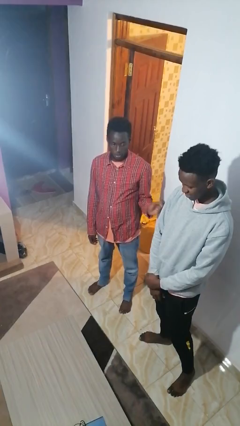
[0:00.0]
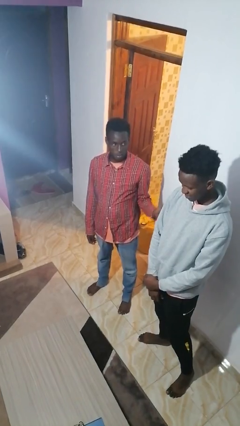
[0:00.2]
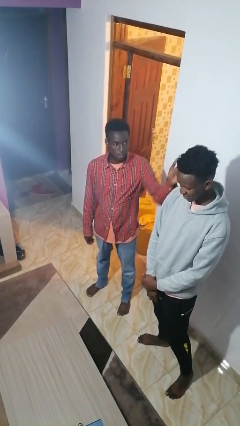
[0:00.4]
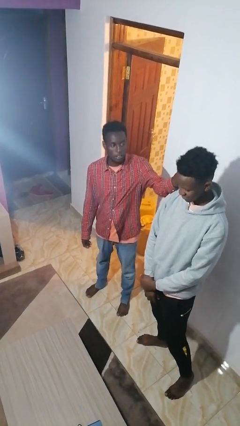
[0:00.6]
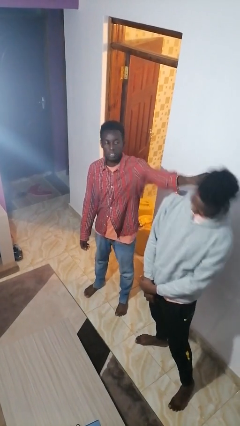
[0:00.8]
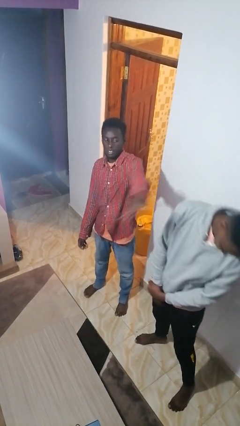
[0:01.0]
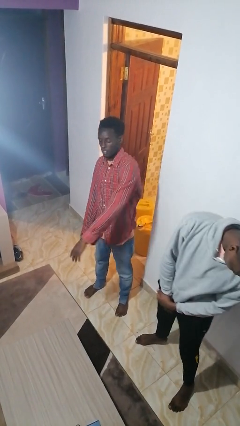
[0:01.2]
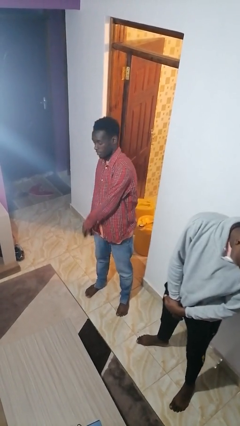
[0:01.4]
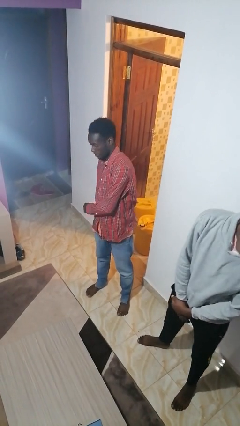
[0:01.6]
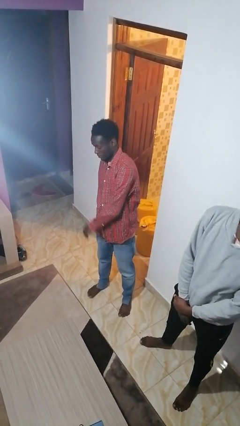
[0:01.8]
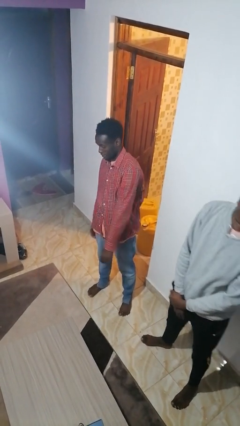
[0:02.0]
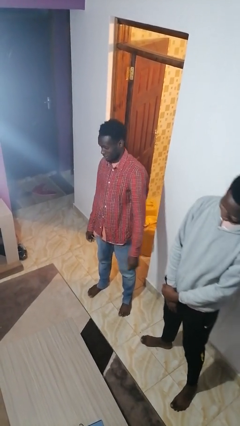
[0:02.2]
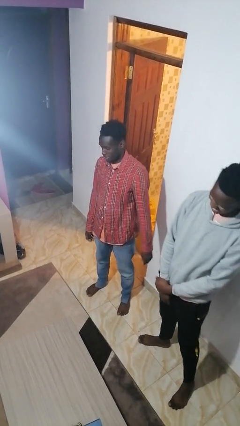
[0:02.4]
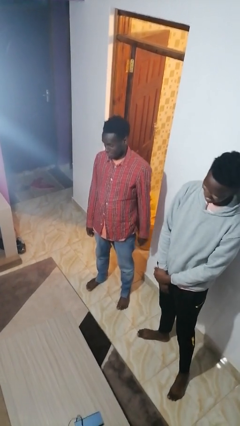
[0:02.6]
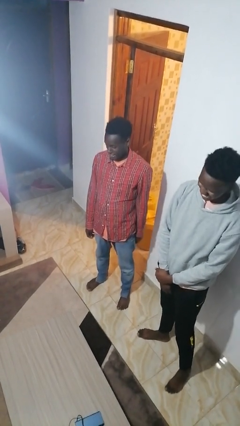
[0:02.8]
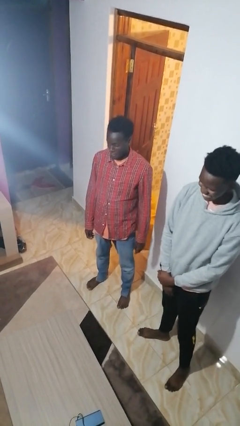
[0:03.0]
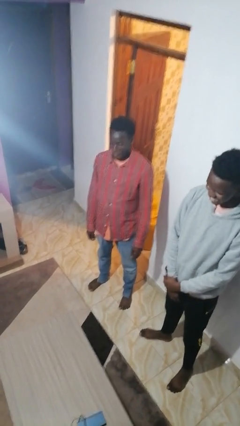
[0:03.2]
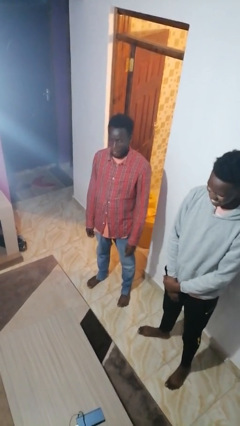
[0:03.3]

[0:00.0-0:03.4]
person shoves person

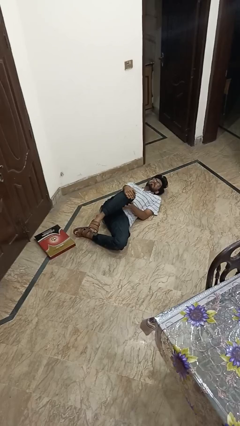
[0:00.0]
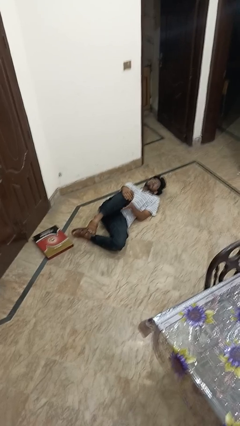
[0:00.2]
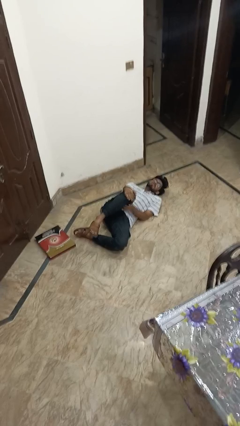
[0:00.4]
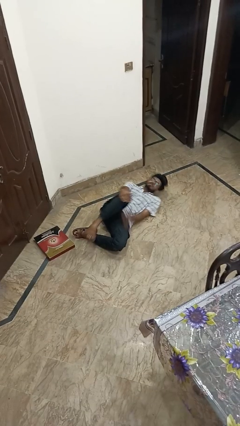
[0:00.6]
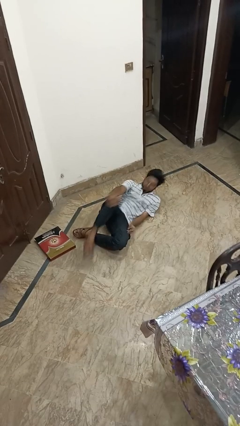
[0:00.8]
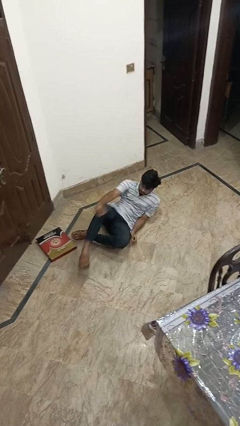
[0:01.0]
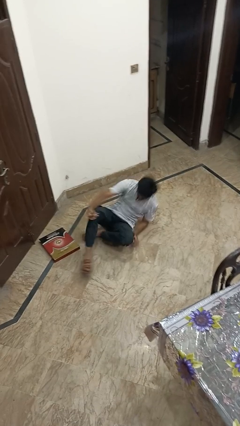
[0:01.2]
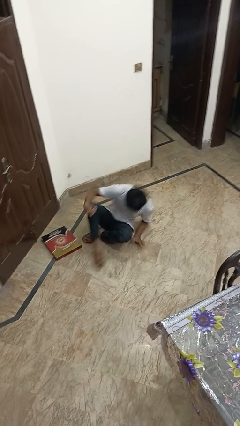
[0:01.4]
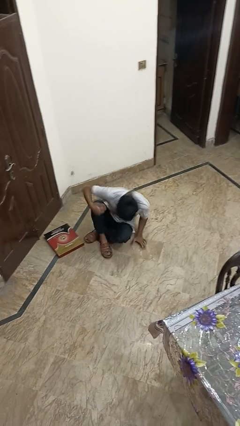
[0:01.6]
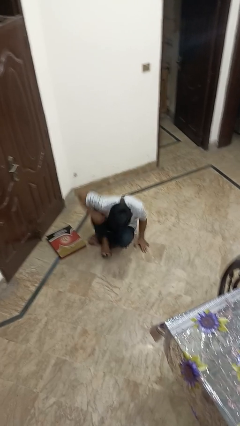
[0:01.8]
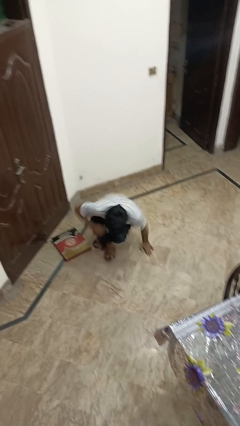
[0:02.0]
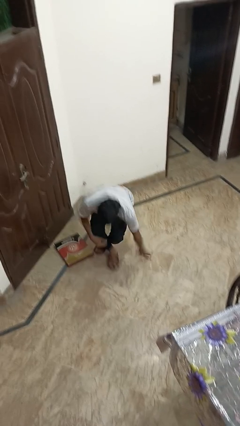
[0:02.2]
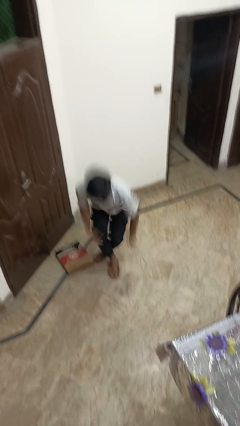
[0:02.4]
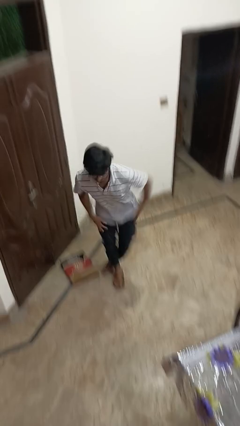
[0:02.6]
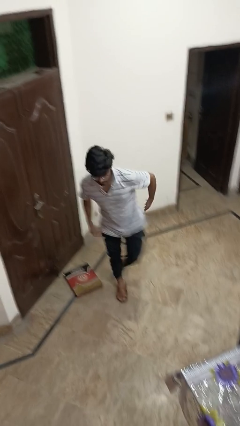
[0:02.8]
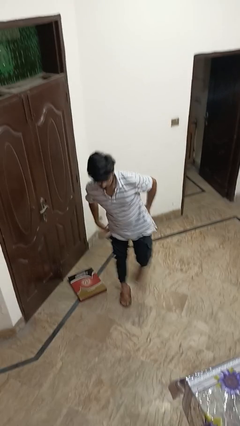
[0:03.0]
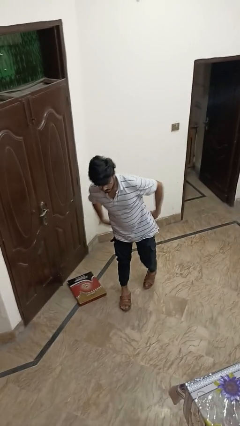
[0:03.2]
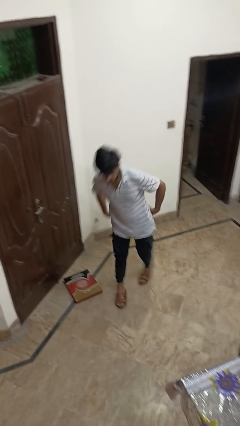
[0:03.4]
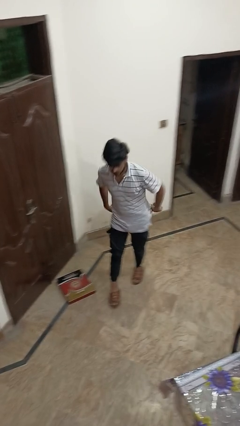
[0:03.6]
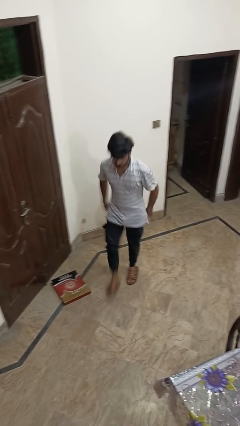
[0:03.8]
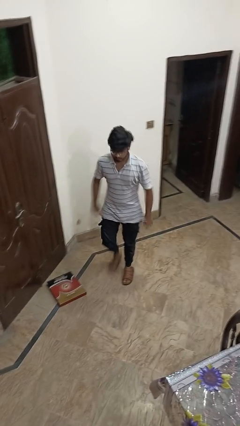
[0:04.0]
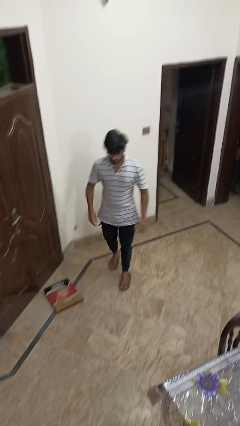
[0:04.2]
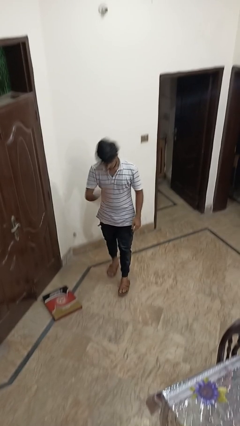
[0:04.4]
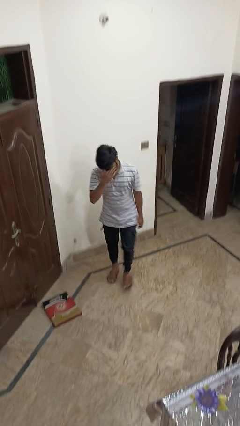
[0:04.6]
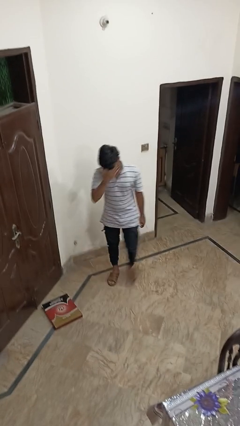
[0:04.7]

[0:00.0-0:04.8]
person stands up from floor

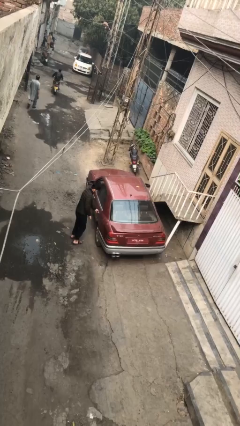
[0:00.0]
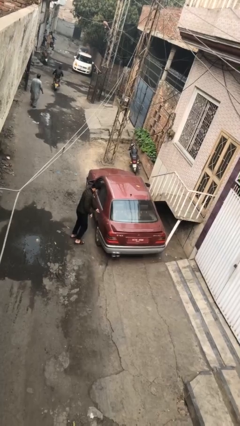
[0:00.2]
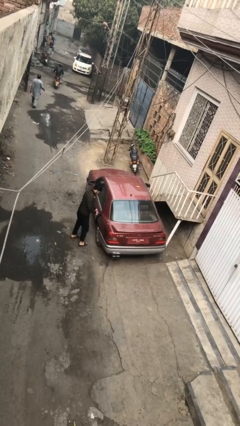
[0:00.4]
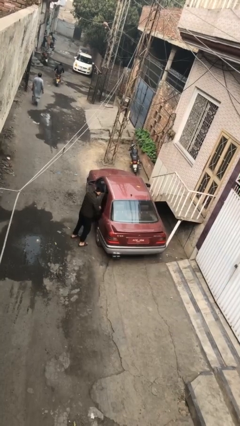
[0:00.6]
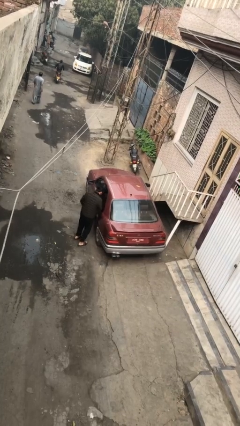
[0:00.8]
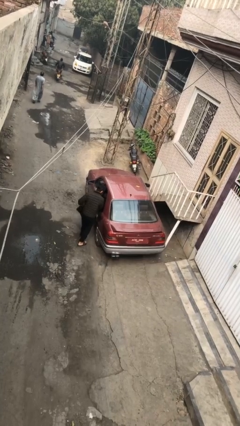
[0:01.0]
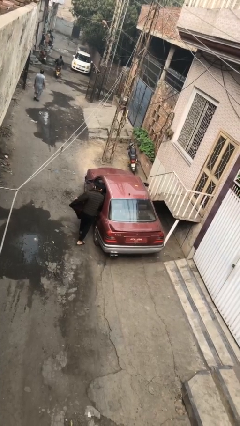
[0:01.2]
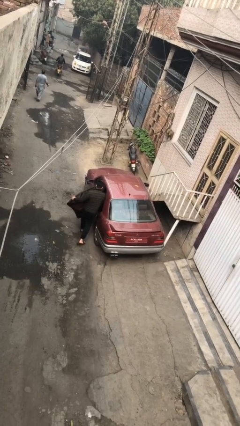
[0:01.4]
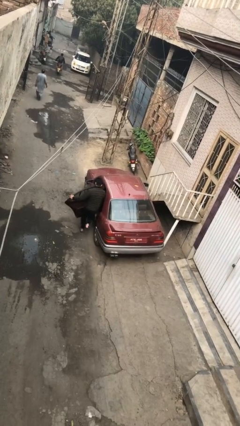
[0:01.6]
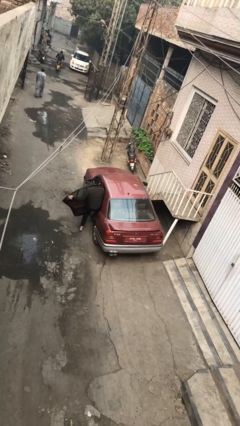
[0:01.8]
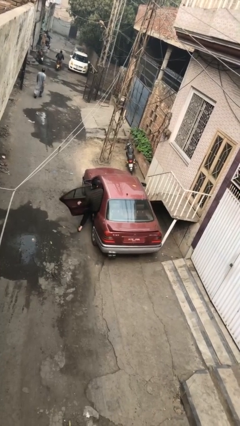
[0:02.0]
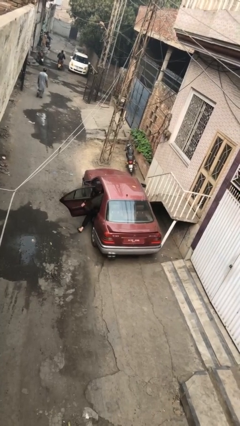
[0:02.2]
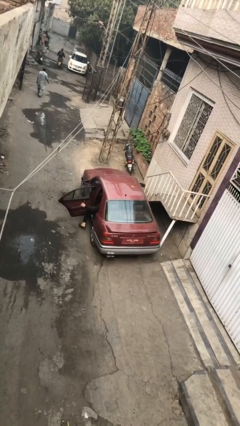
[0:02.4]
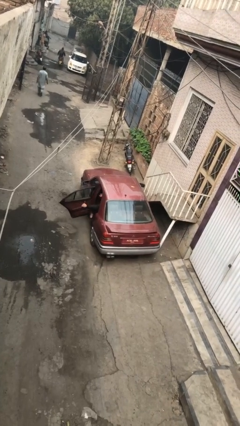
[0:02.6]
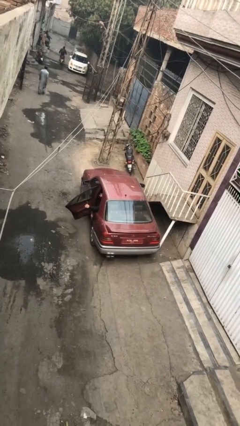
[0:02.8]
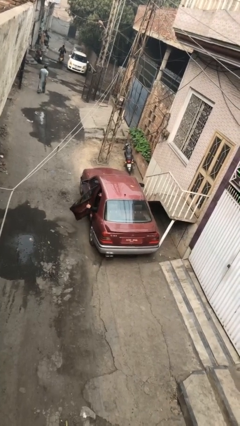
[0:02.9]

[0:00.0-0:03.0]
car picks up person

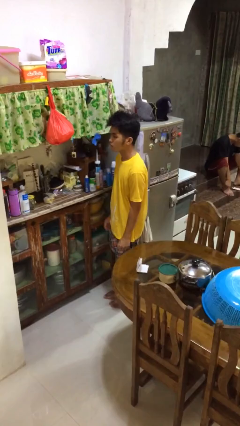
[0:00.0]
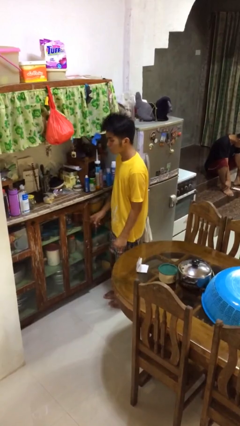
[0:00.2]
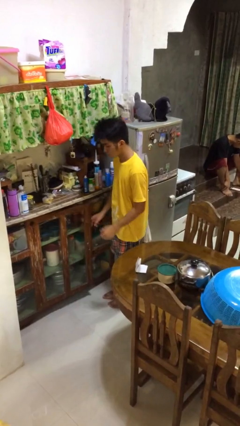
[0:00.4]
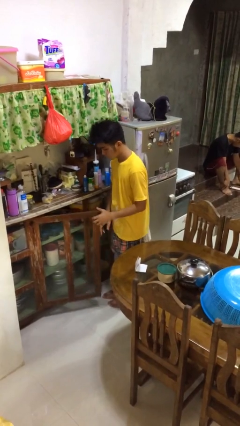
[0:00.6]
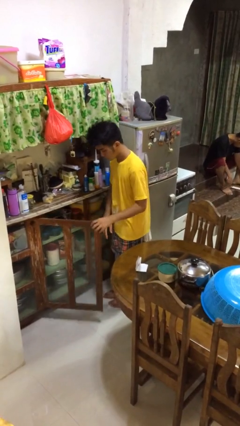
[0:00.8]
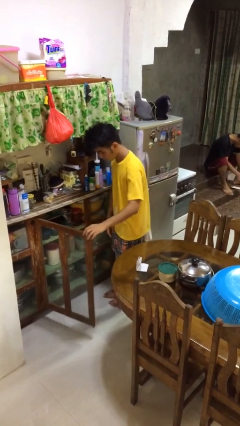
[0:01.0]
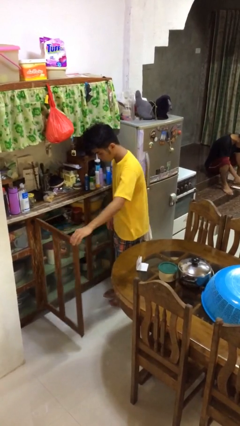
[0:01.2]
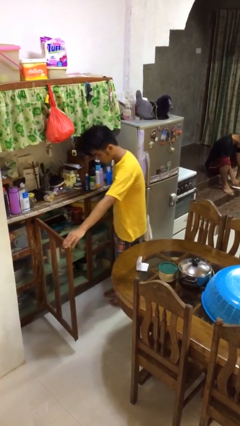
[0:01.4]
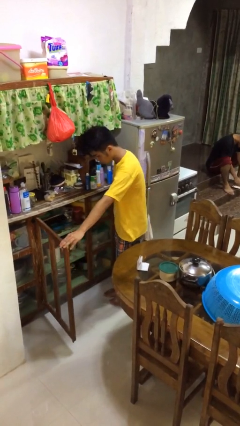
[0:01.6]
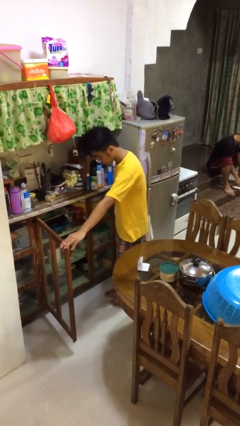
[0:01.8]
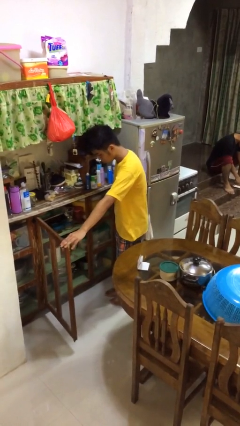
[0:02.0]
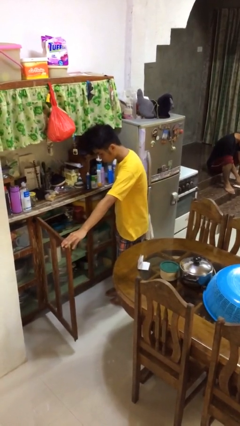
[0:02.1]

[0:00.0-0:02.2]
person opens cabinet

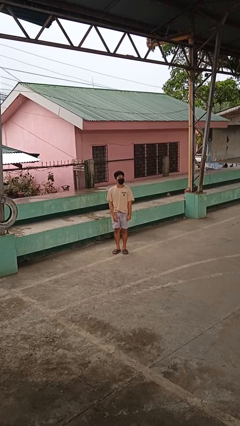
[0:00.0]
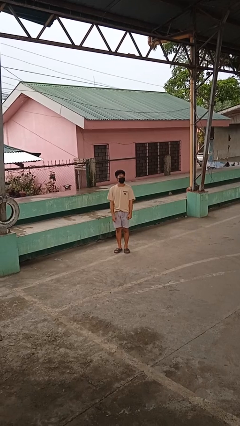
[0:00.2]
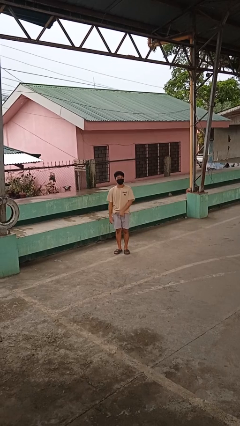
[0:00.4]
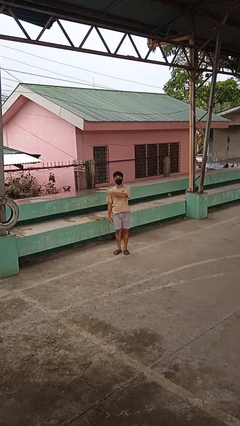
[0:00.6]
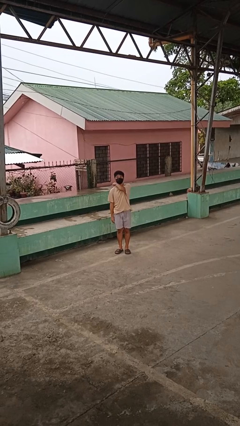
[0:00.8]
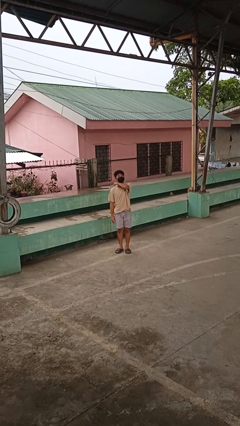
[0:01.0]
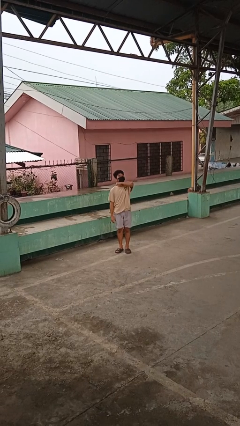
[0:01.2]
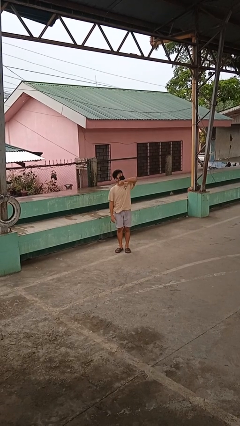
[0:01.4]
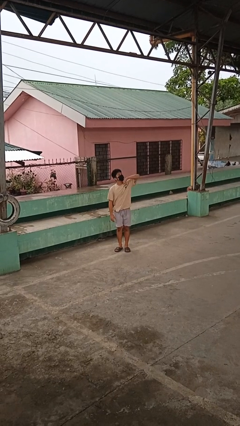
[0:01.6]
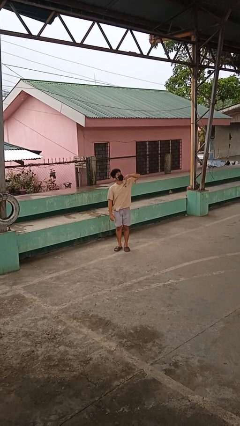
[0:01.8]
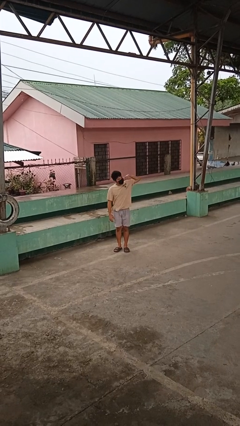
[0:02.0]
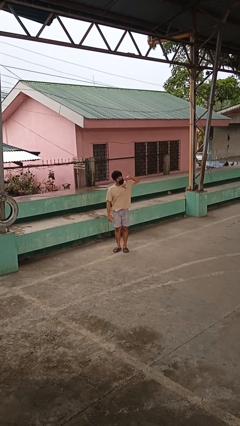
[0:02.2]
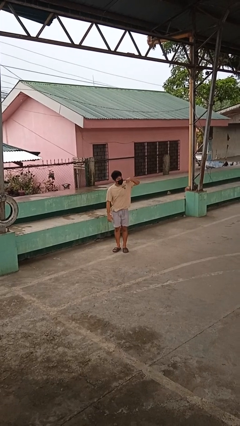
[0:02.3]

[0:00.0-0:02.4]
person gestures cut

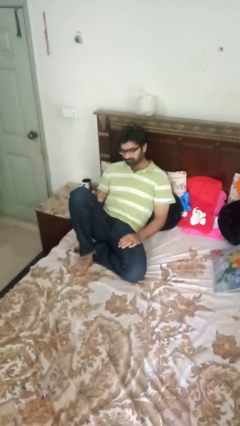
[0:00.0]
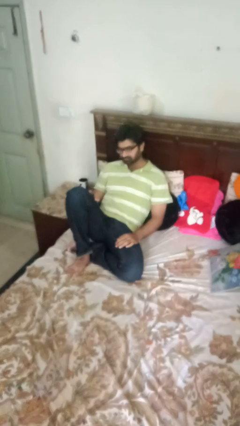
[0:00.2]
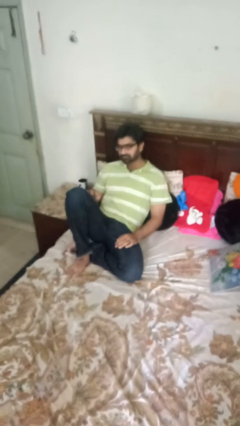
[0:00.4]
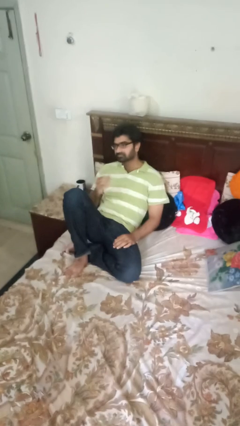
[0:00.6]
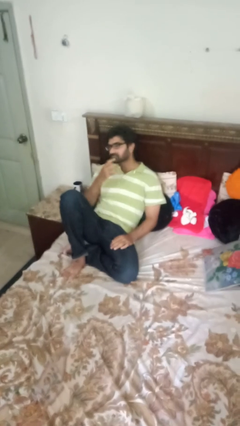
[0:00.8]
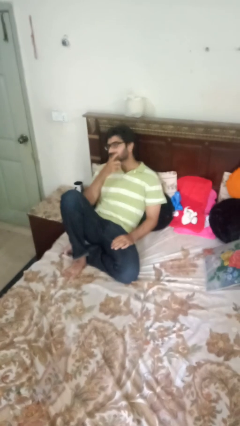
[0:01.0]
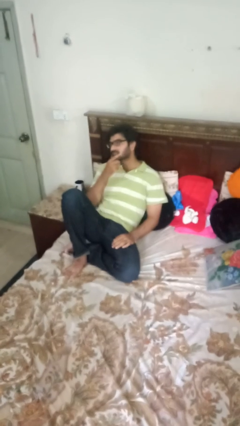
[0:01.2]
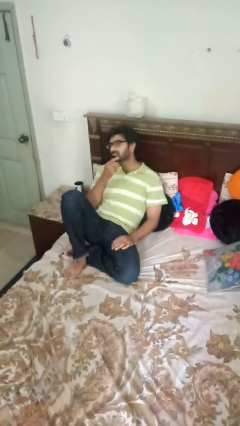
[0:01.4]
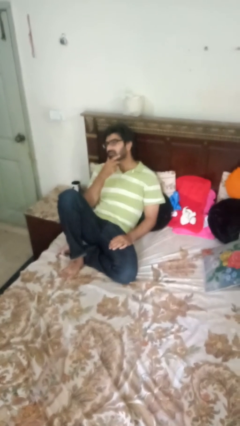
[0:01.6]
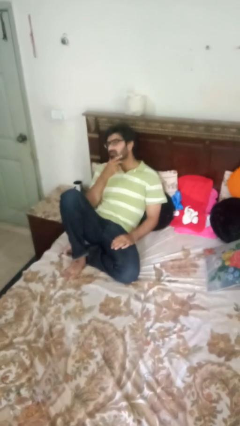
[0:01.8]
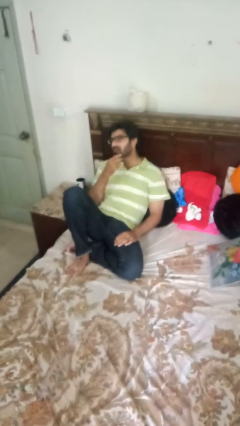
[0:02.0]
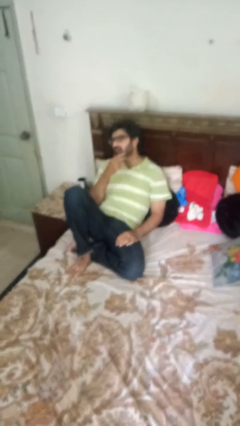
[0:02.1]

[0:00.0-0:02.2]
person strokes chin
